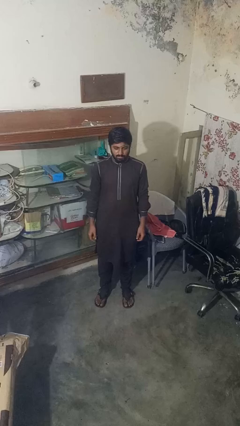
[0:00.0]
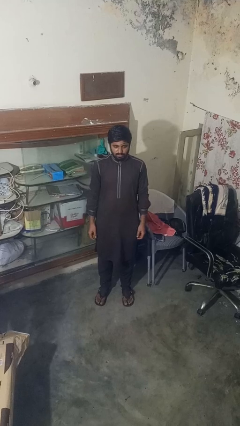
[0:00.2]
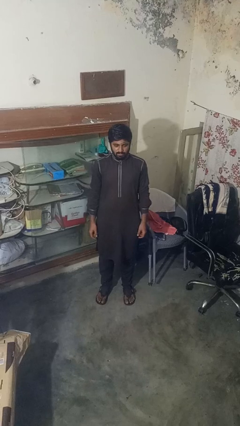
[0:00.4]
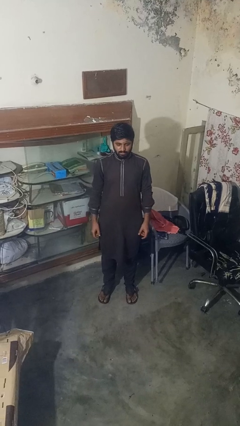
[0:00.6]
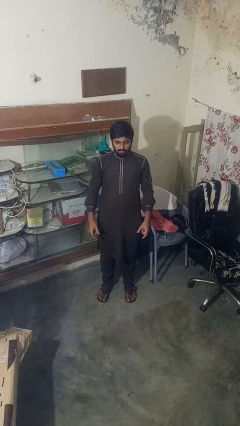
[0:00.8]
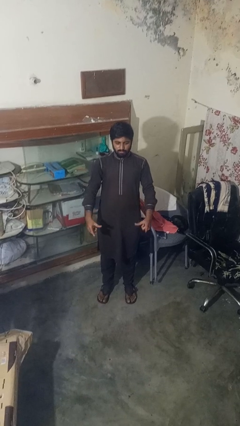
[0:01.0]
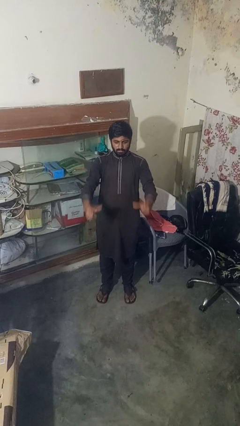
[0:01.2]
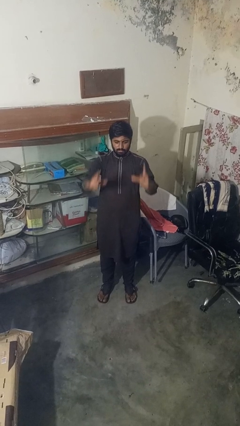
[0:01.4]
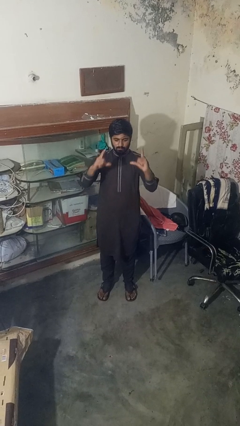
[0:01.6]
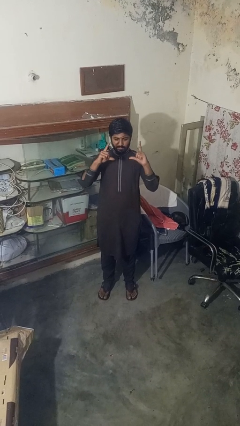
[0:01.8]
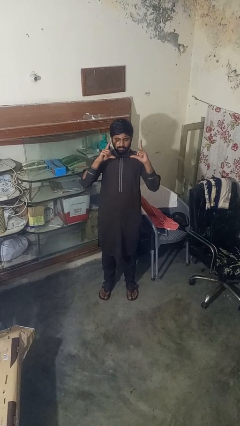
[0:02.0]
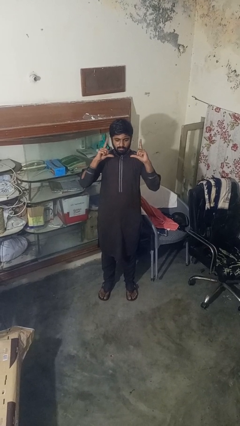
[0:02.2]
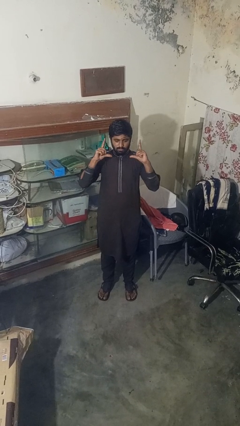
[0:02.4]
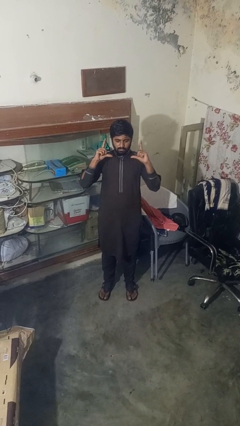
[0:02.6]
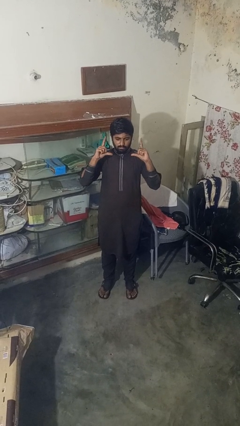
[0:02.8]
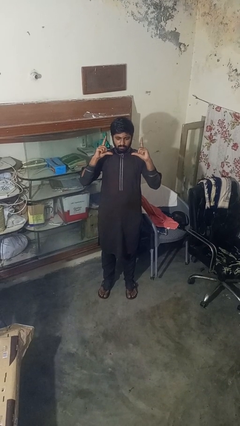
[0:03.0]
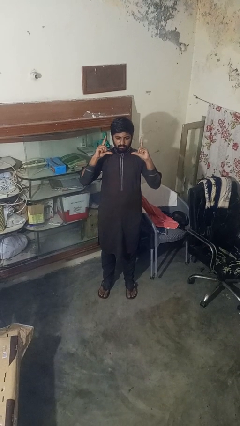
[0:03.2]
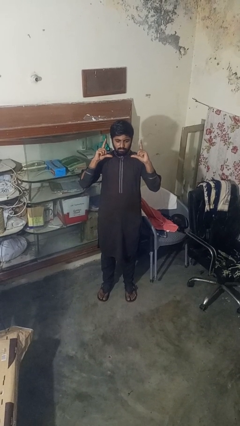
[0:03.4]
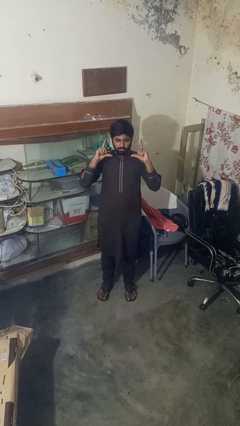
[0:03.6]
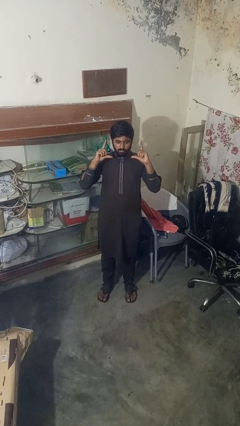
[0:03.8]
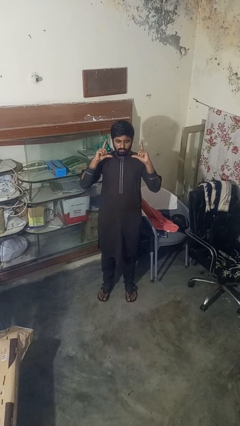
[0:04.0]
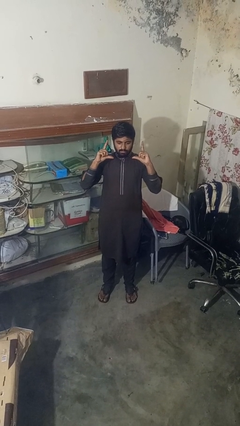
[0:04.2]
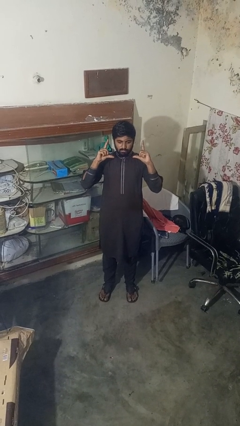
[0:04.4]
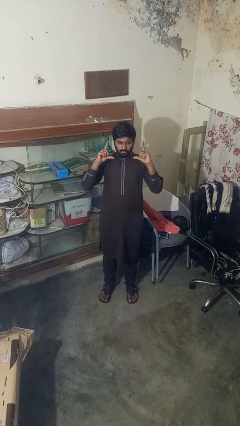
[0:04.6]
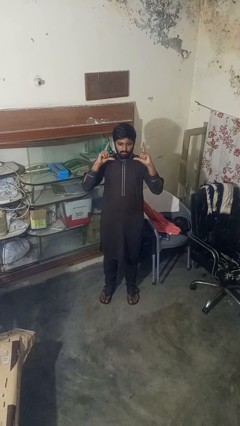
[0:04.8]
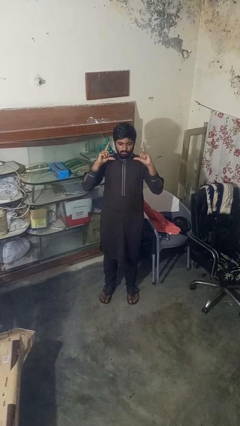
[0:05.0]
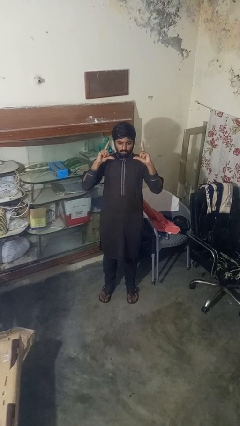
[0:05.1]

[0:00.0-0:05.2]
person gestures zoom in

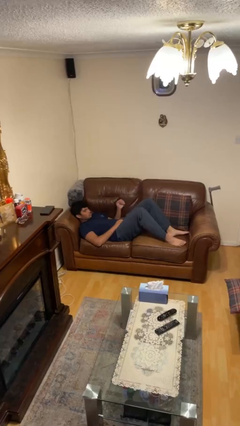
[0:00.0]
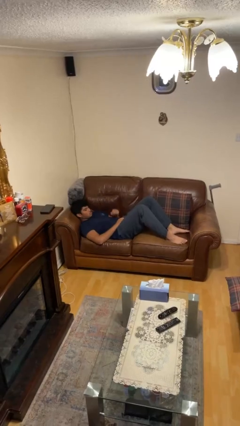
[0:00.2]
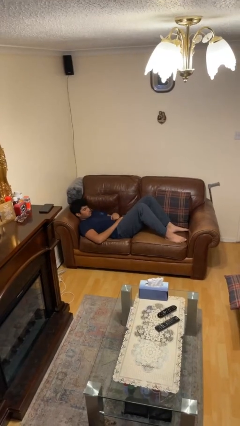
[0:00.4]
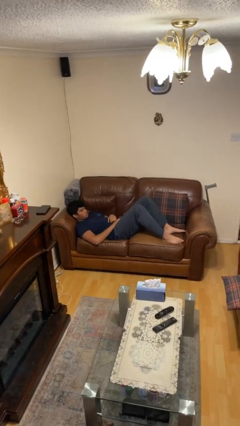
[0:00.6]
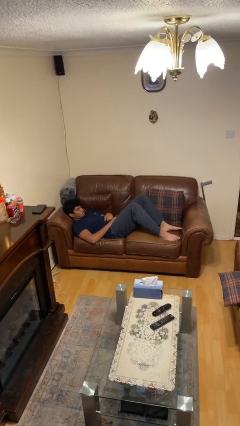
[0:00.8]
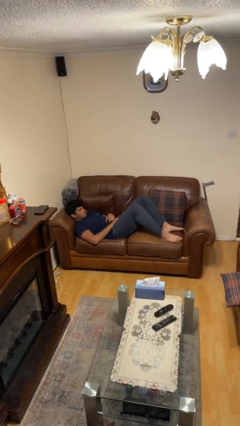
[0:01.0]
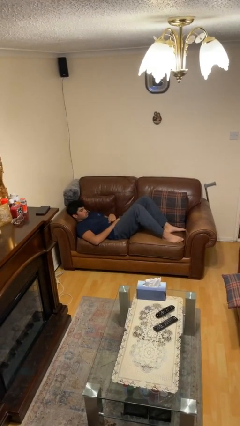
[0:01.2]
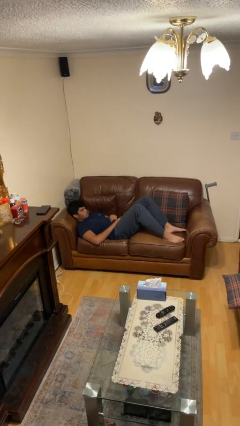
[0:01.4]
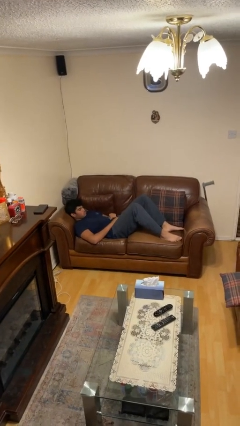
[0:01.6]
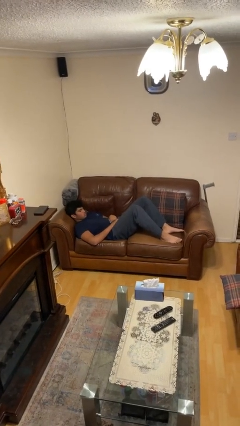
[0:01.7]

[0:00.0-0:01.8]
person lies down on couch

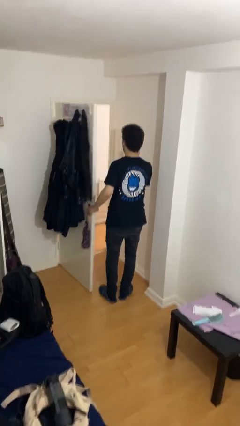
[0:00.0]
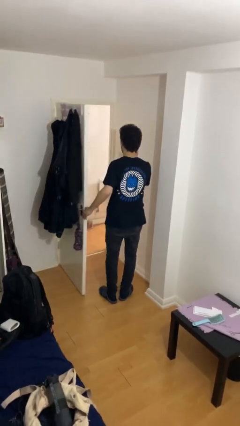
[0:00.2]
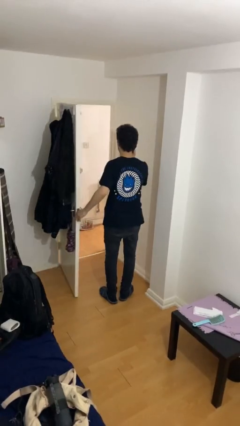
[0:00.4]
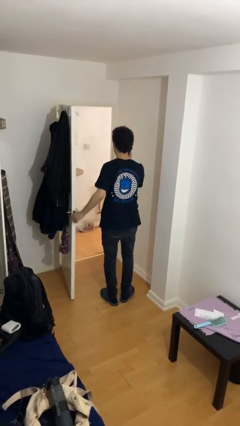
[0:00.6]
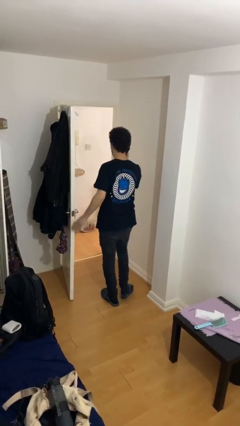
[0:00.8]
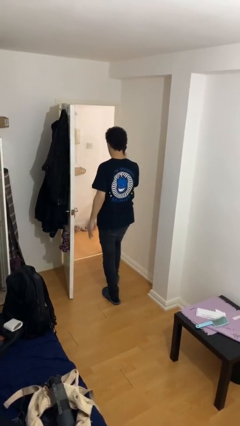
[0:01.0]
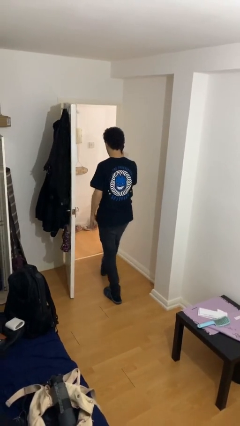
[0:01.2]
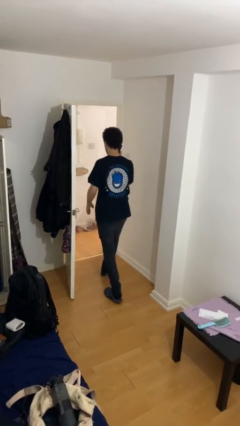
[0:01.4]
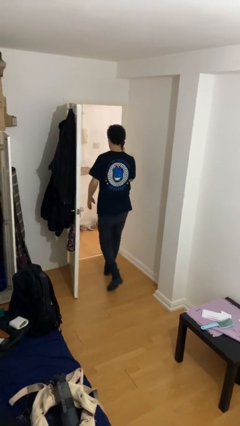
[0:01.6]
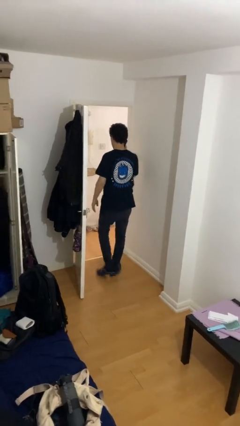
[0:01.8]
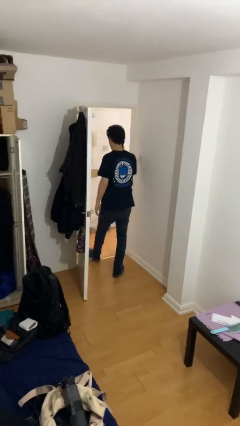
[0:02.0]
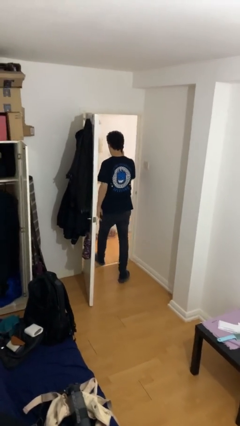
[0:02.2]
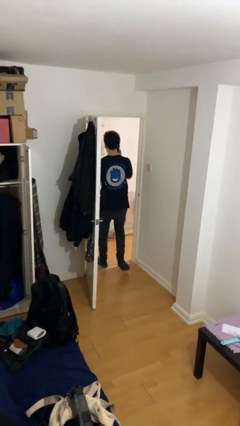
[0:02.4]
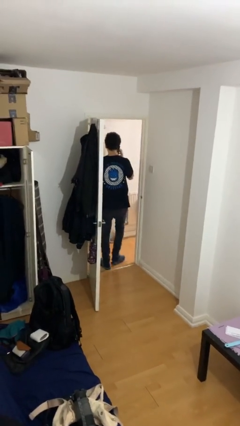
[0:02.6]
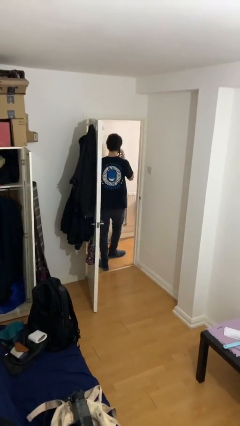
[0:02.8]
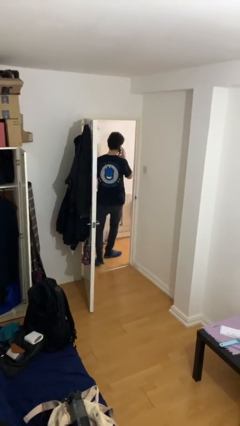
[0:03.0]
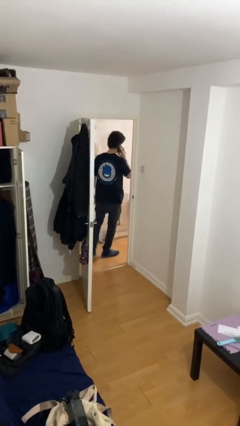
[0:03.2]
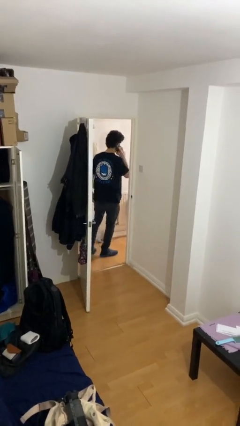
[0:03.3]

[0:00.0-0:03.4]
person exits scene through structure

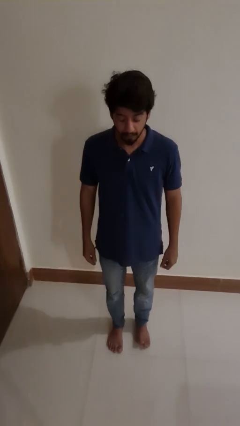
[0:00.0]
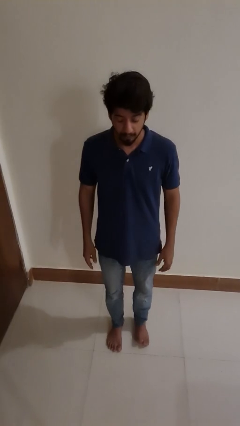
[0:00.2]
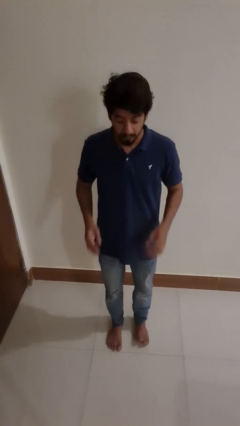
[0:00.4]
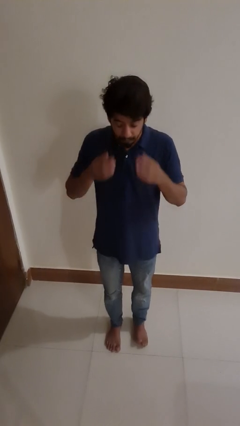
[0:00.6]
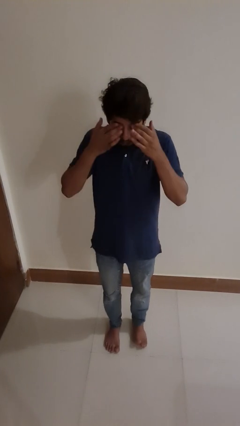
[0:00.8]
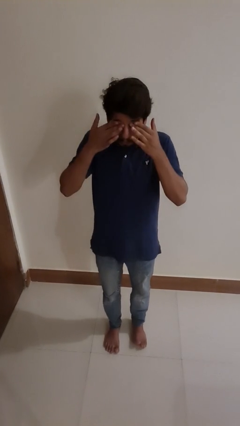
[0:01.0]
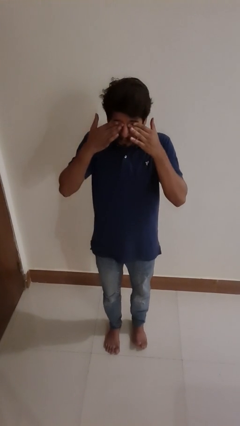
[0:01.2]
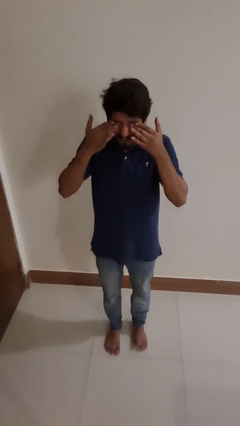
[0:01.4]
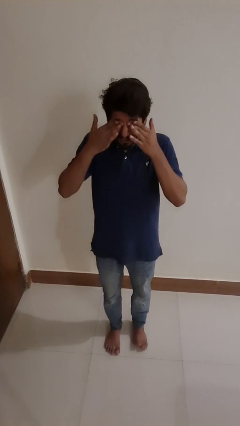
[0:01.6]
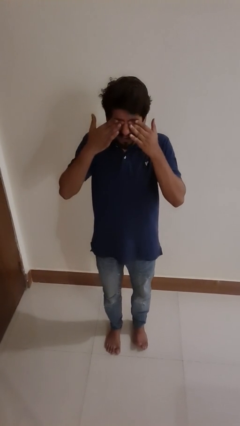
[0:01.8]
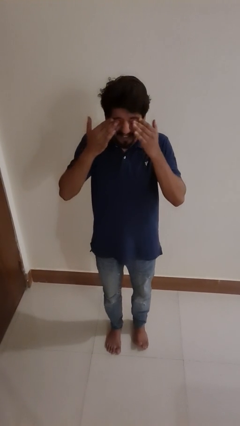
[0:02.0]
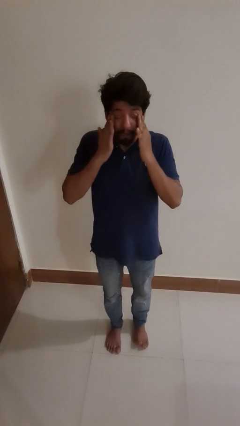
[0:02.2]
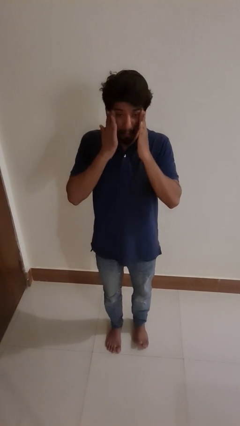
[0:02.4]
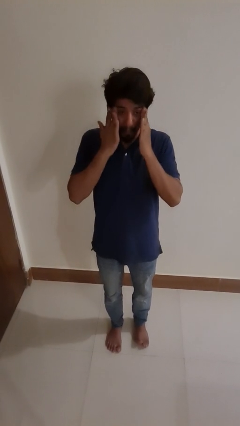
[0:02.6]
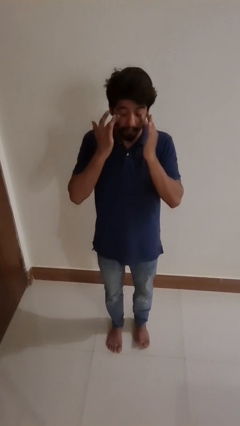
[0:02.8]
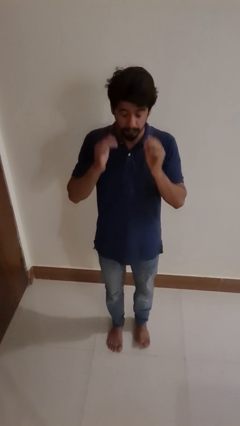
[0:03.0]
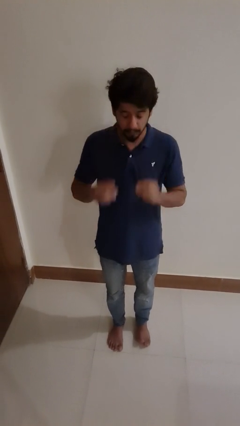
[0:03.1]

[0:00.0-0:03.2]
person rubs eyes

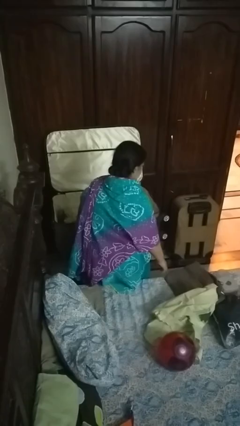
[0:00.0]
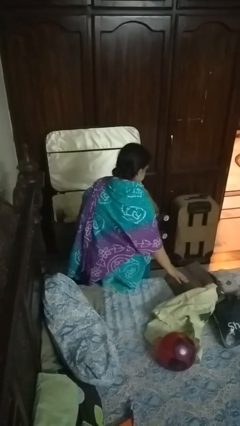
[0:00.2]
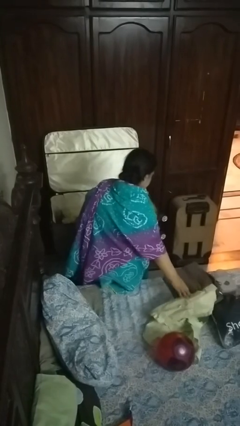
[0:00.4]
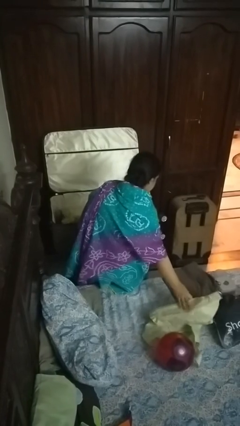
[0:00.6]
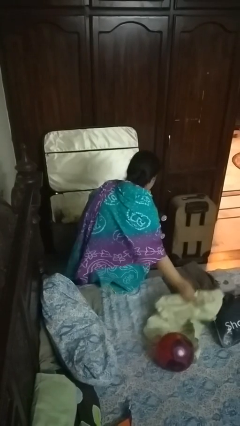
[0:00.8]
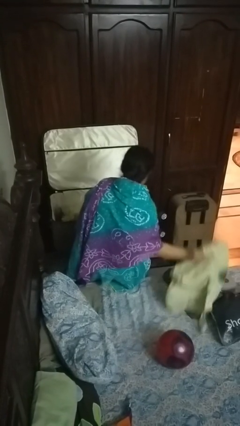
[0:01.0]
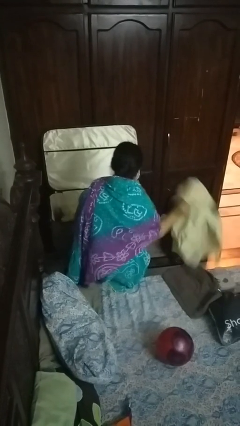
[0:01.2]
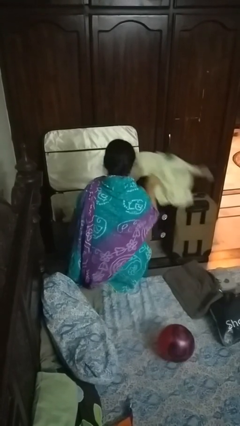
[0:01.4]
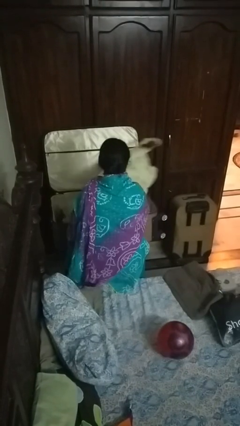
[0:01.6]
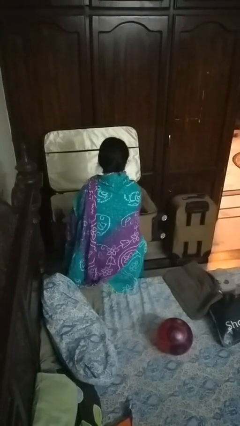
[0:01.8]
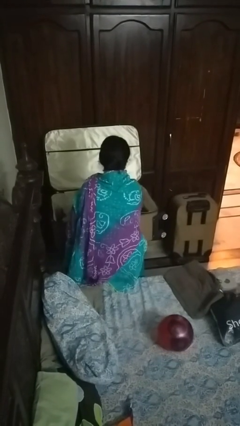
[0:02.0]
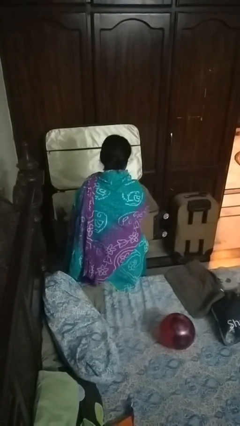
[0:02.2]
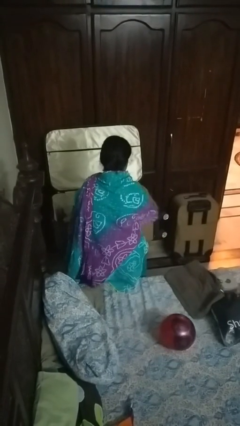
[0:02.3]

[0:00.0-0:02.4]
person loads clothes into suitcase

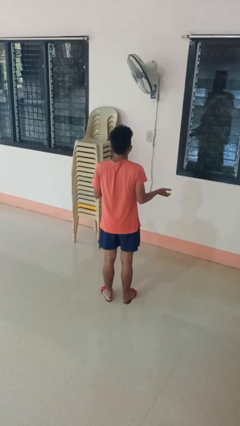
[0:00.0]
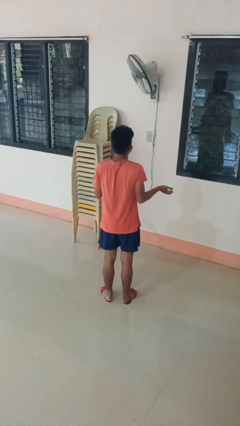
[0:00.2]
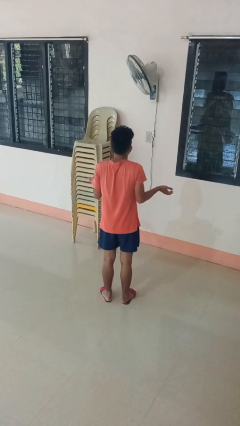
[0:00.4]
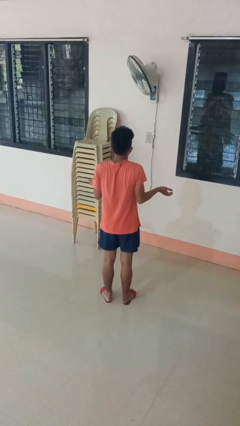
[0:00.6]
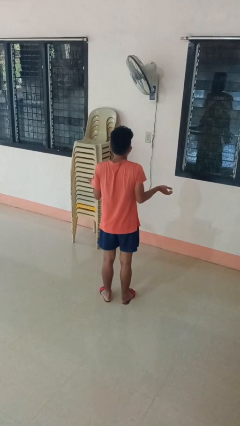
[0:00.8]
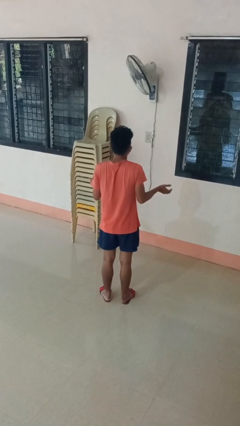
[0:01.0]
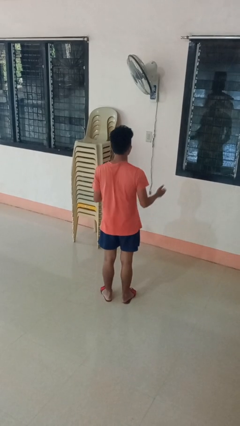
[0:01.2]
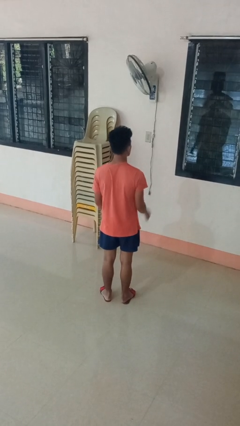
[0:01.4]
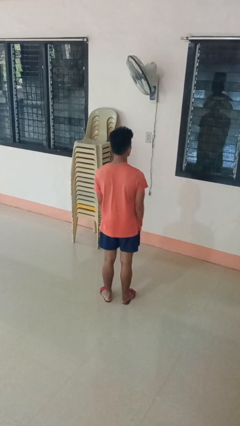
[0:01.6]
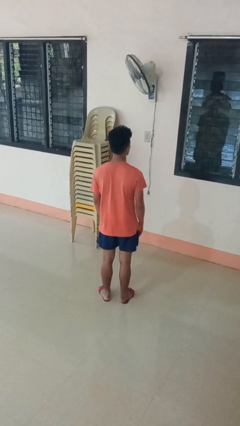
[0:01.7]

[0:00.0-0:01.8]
person shrugs
